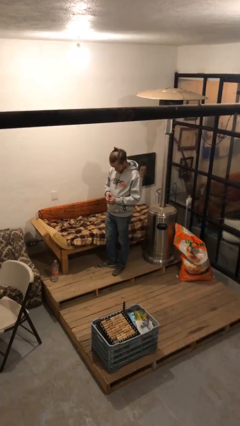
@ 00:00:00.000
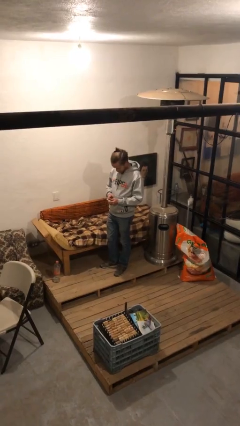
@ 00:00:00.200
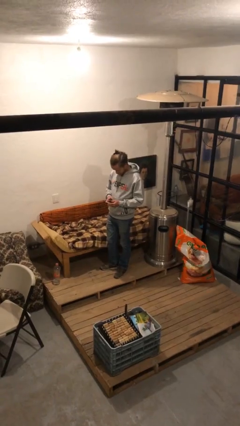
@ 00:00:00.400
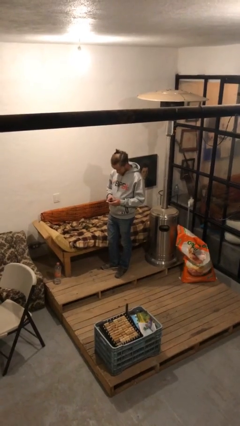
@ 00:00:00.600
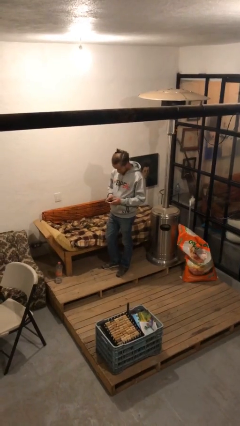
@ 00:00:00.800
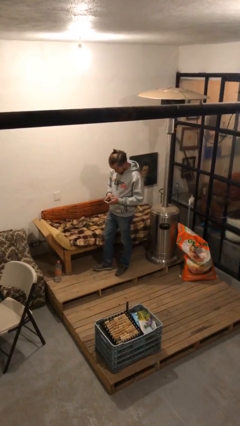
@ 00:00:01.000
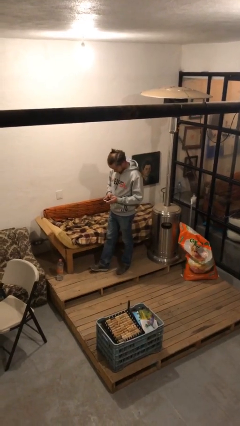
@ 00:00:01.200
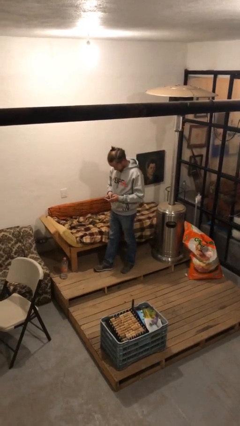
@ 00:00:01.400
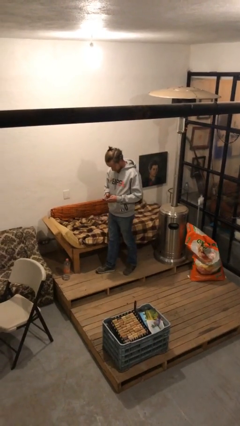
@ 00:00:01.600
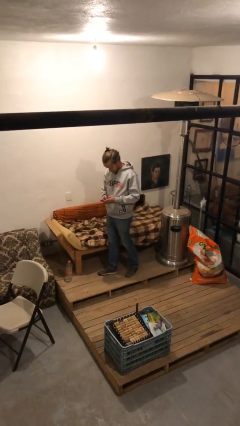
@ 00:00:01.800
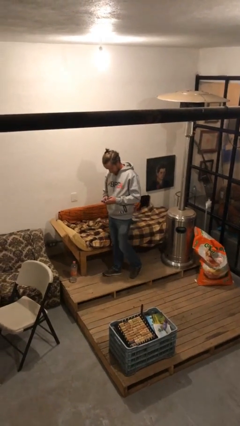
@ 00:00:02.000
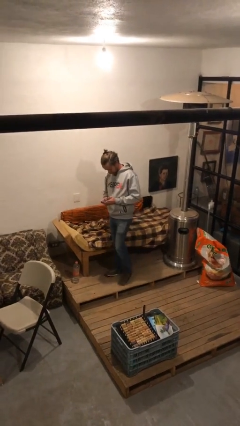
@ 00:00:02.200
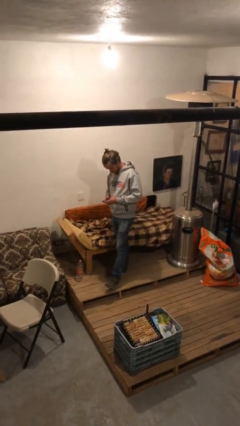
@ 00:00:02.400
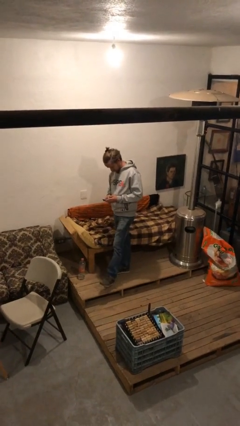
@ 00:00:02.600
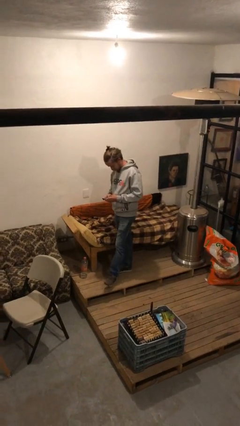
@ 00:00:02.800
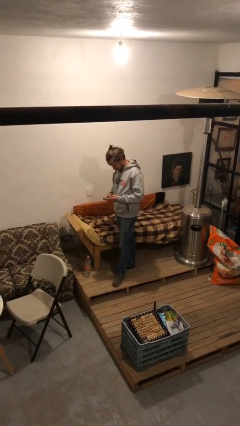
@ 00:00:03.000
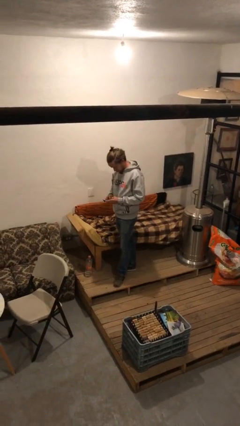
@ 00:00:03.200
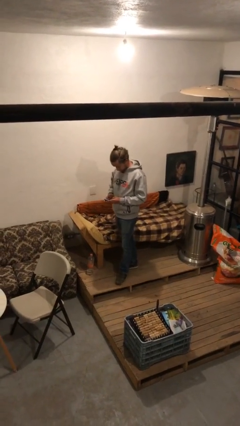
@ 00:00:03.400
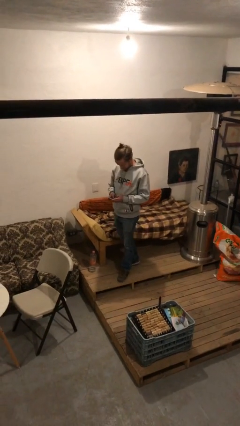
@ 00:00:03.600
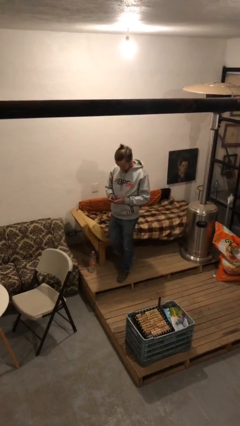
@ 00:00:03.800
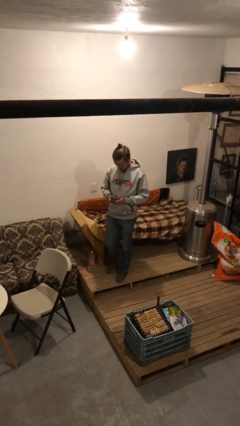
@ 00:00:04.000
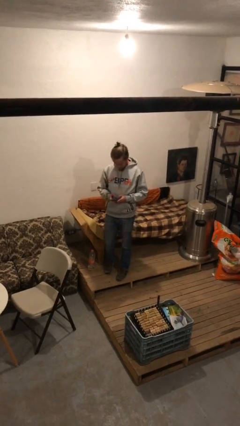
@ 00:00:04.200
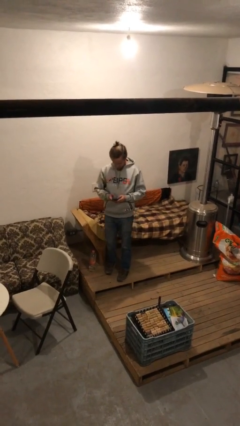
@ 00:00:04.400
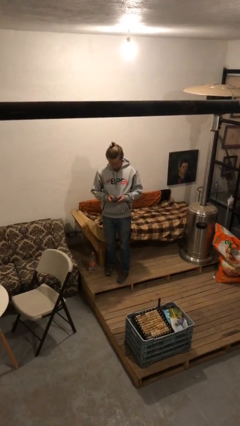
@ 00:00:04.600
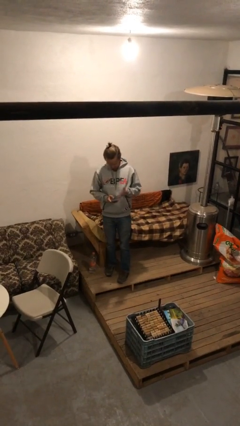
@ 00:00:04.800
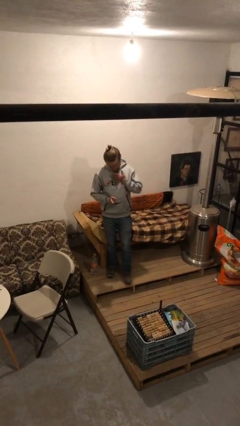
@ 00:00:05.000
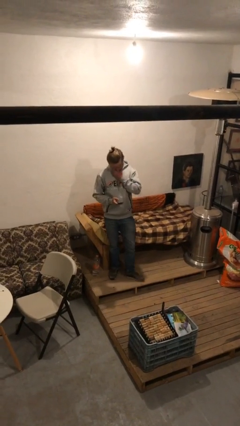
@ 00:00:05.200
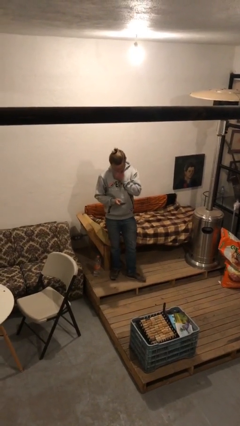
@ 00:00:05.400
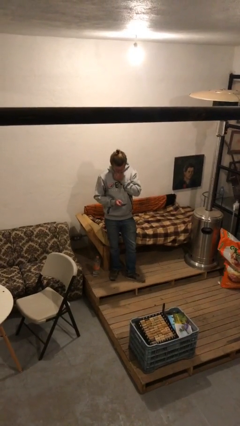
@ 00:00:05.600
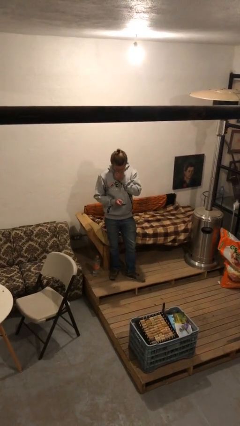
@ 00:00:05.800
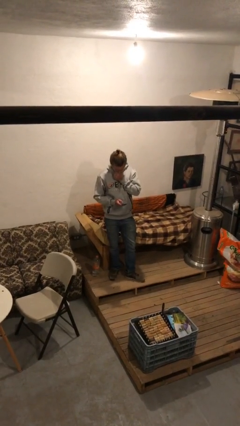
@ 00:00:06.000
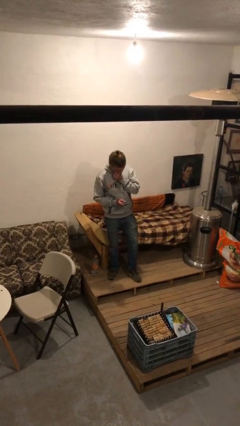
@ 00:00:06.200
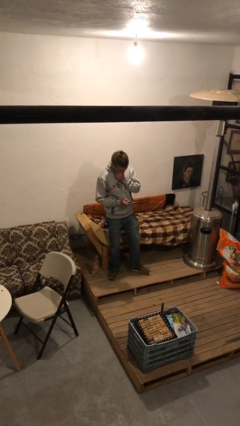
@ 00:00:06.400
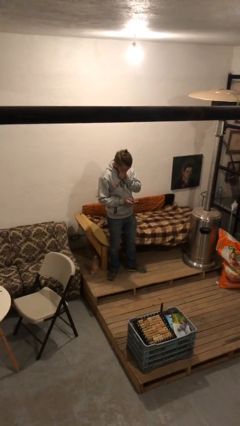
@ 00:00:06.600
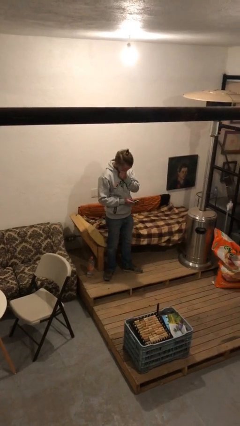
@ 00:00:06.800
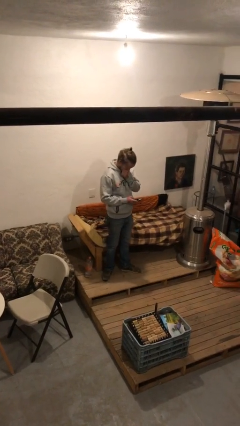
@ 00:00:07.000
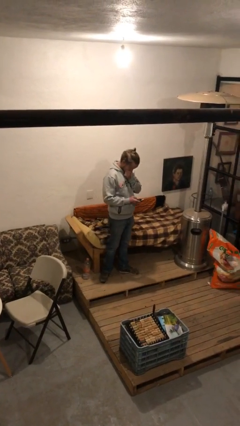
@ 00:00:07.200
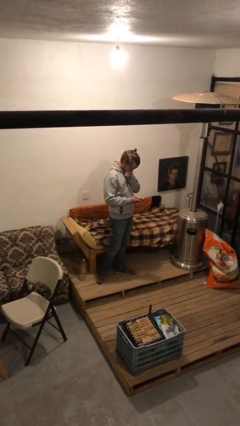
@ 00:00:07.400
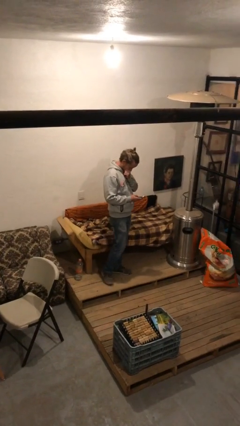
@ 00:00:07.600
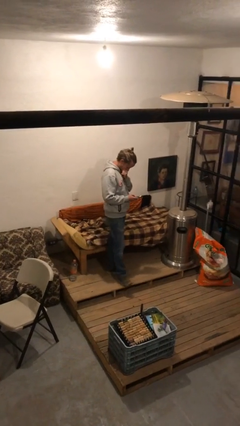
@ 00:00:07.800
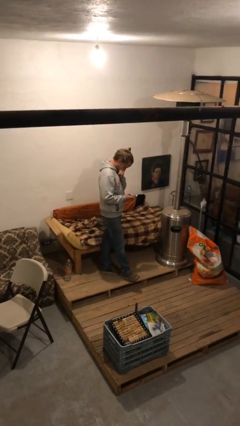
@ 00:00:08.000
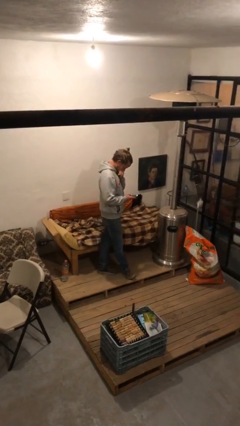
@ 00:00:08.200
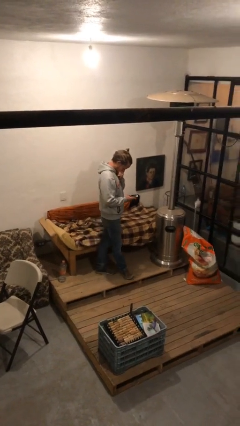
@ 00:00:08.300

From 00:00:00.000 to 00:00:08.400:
person texts on phone

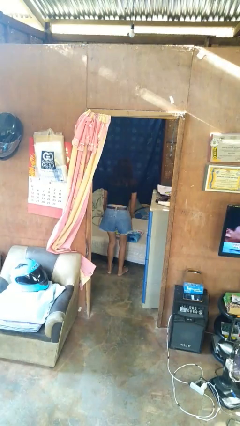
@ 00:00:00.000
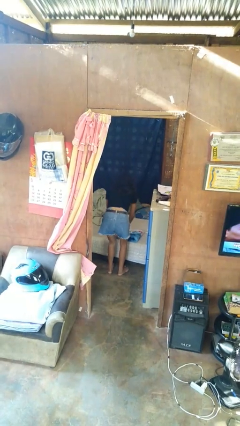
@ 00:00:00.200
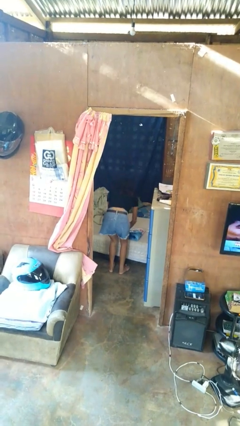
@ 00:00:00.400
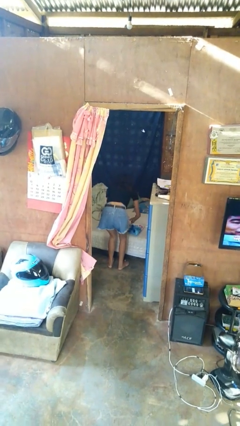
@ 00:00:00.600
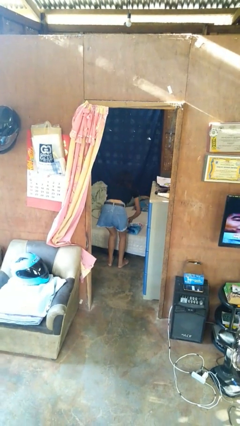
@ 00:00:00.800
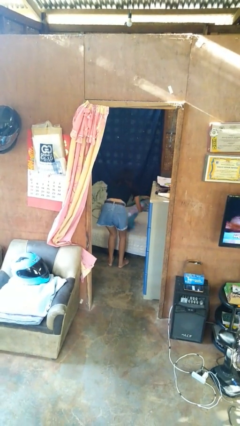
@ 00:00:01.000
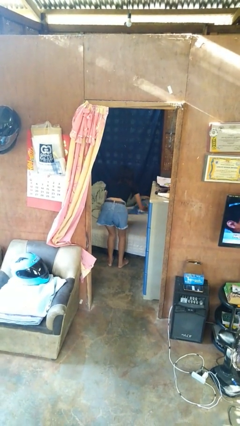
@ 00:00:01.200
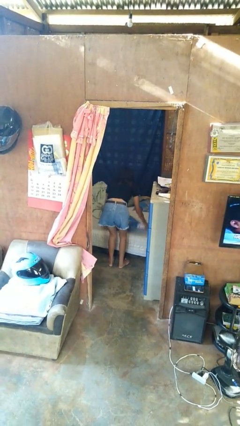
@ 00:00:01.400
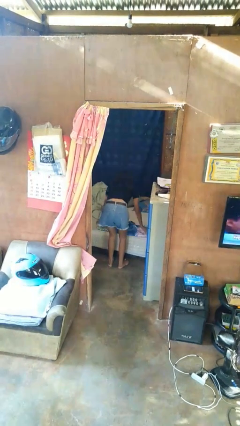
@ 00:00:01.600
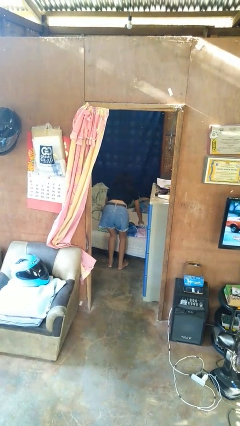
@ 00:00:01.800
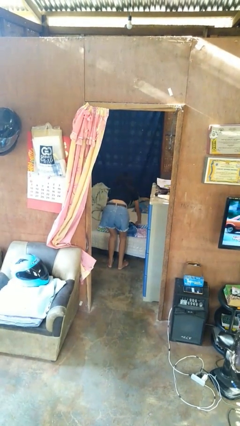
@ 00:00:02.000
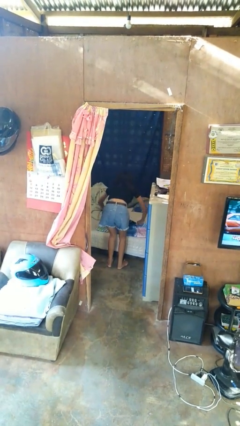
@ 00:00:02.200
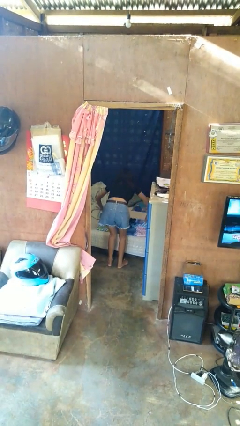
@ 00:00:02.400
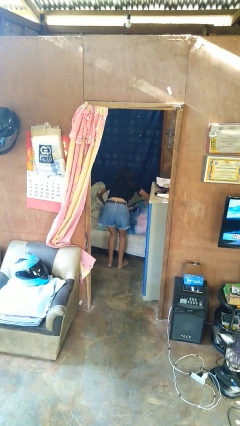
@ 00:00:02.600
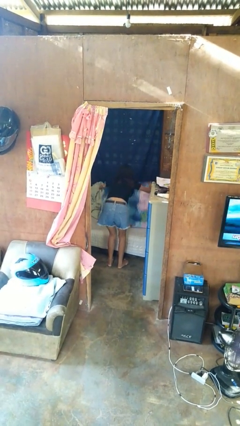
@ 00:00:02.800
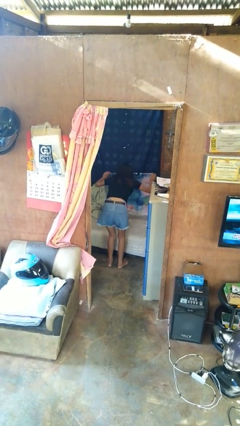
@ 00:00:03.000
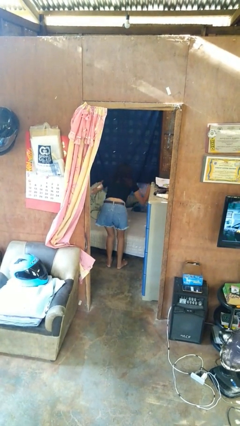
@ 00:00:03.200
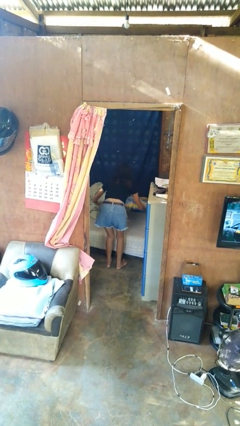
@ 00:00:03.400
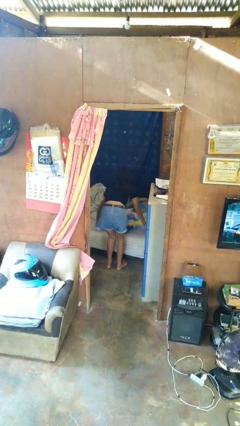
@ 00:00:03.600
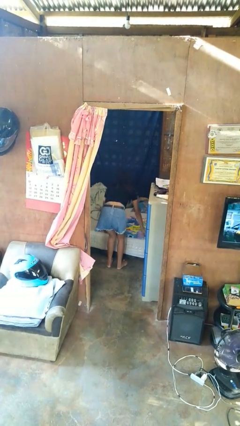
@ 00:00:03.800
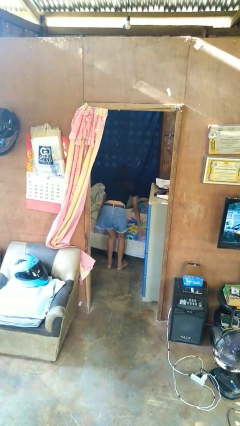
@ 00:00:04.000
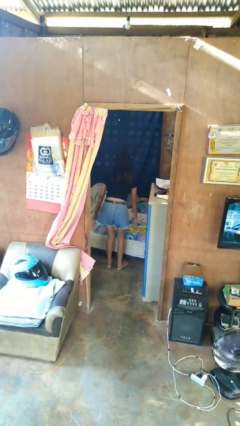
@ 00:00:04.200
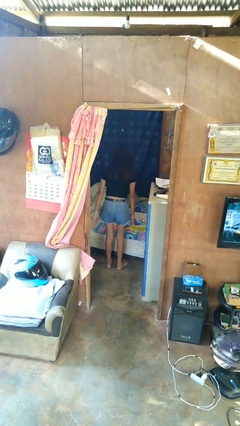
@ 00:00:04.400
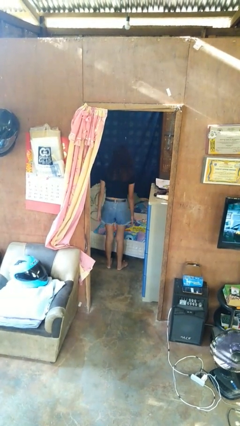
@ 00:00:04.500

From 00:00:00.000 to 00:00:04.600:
person unfolds blanket

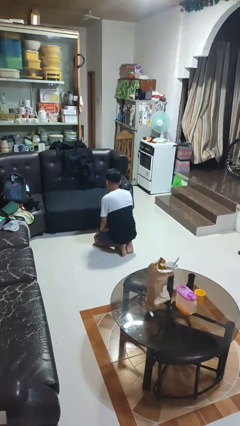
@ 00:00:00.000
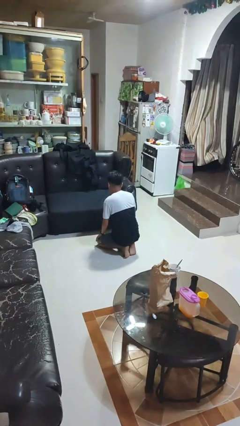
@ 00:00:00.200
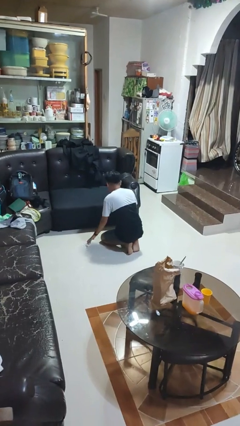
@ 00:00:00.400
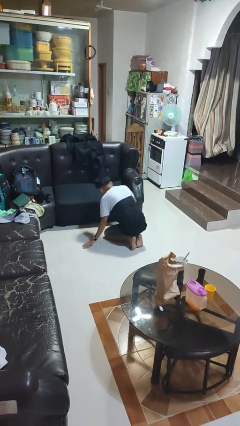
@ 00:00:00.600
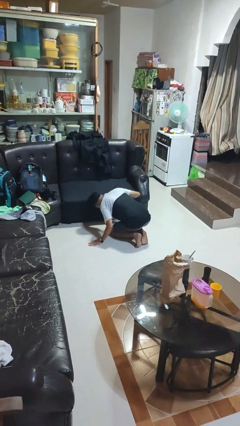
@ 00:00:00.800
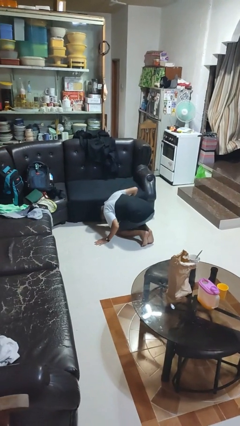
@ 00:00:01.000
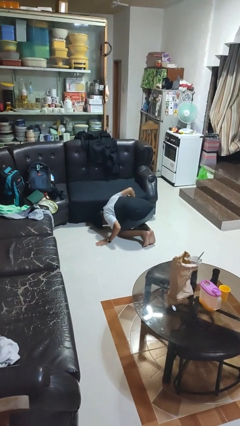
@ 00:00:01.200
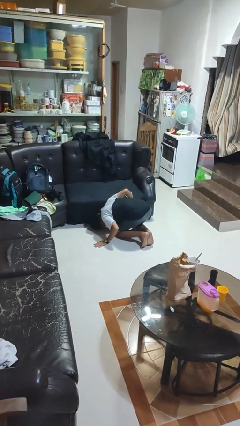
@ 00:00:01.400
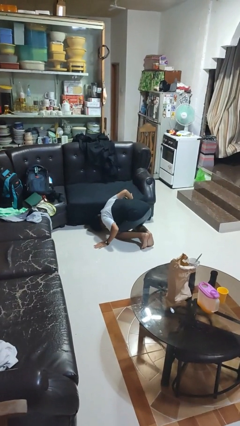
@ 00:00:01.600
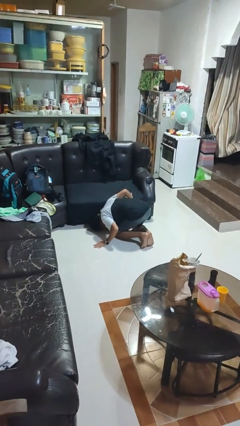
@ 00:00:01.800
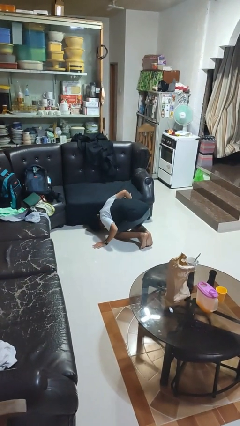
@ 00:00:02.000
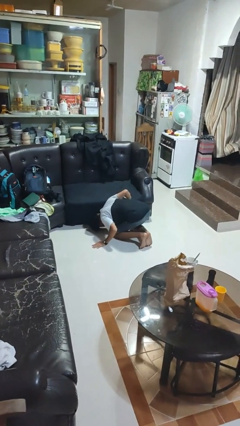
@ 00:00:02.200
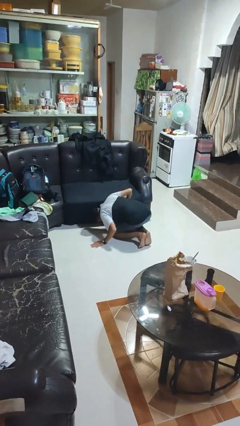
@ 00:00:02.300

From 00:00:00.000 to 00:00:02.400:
person searches under couch

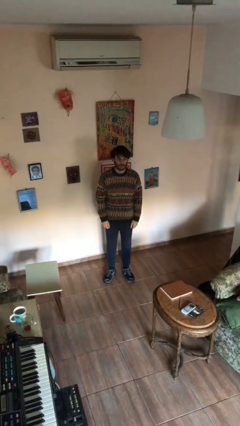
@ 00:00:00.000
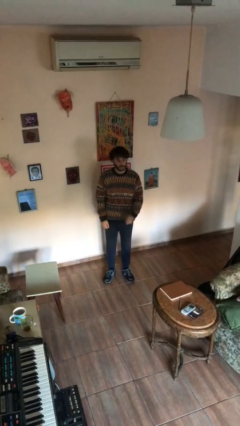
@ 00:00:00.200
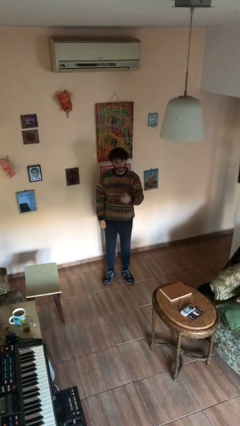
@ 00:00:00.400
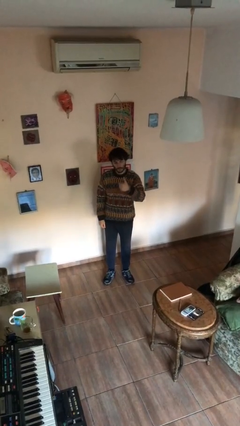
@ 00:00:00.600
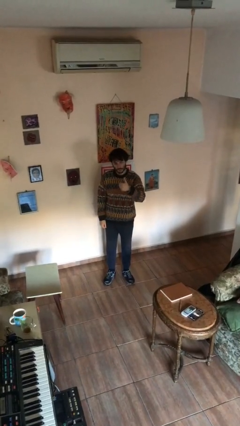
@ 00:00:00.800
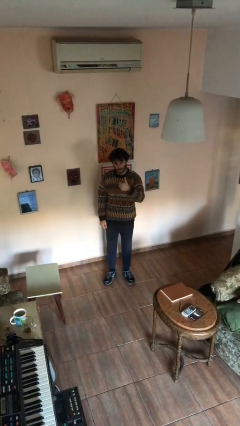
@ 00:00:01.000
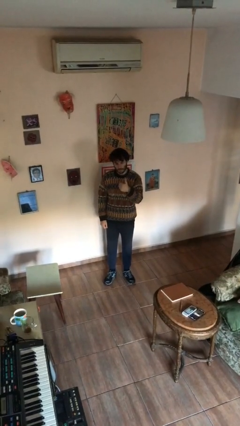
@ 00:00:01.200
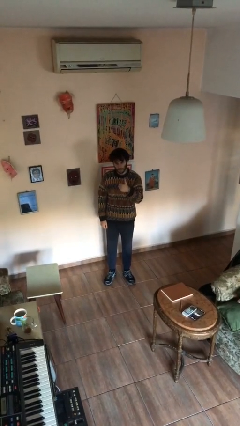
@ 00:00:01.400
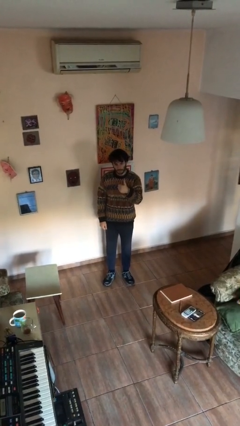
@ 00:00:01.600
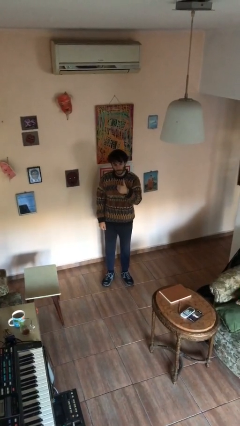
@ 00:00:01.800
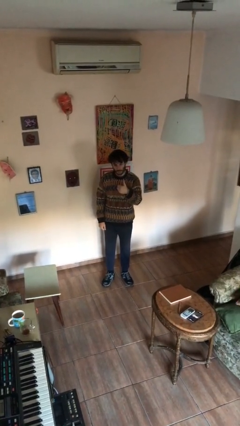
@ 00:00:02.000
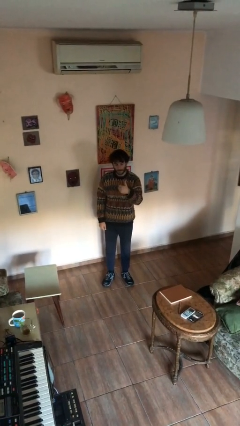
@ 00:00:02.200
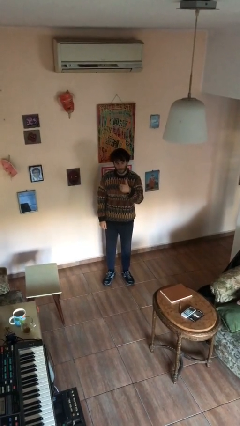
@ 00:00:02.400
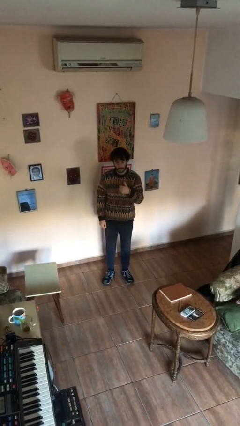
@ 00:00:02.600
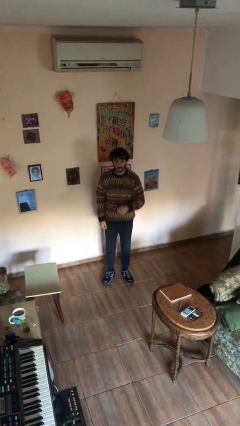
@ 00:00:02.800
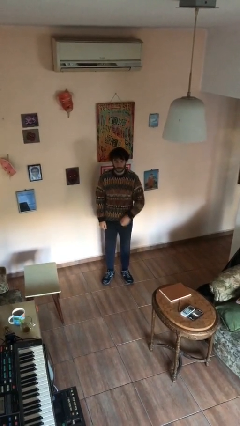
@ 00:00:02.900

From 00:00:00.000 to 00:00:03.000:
person gestures thumbs up
